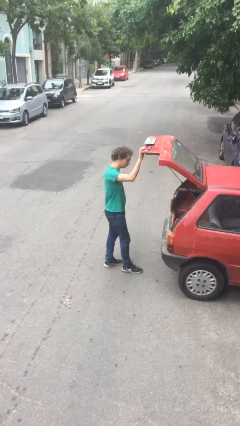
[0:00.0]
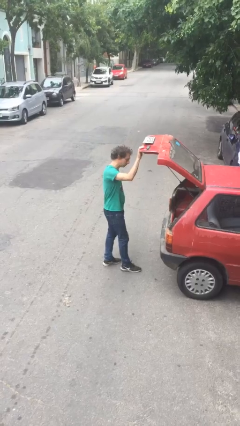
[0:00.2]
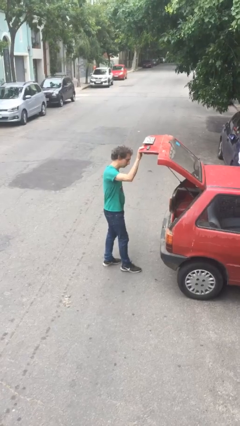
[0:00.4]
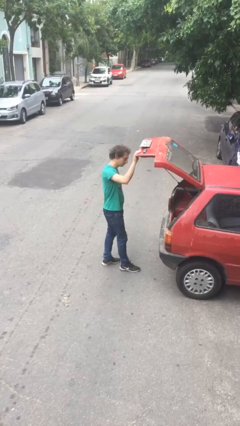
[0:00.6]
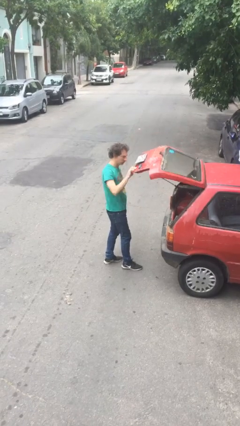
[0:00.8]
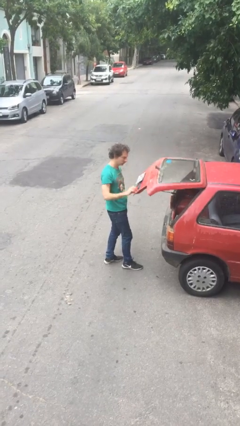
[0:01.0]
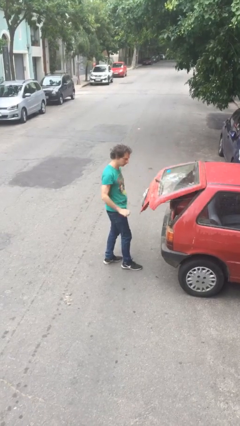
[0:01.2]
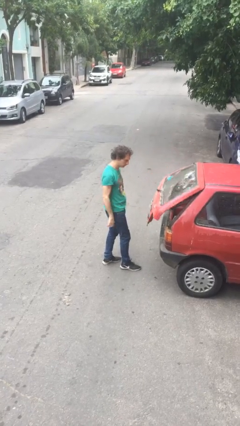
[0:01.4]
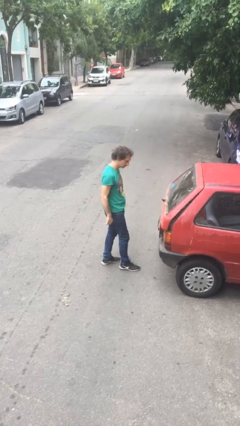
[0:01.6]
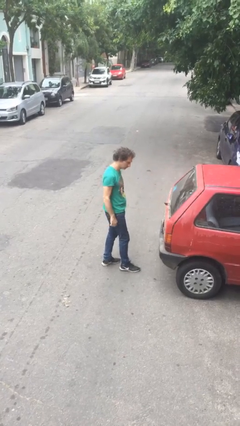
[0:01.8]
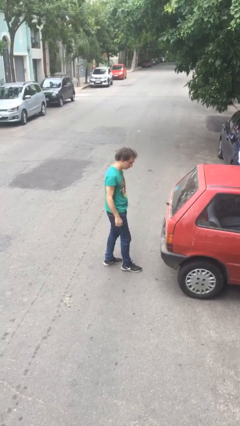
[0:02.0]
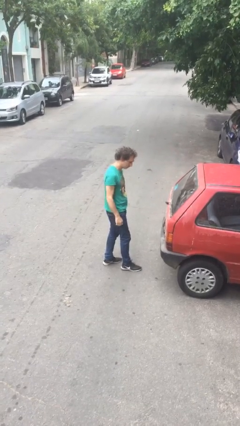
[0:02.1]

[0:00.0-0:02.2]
person closes car trunk

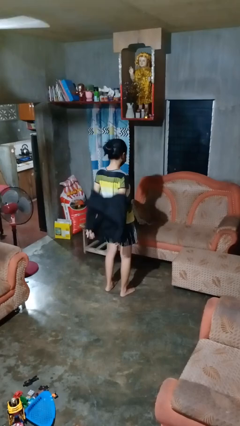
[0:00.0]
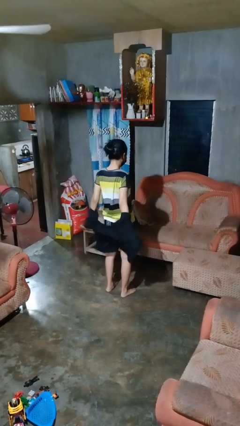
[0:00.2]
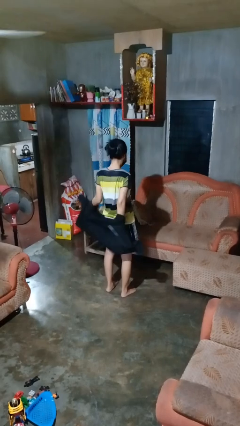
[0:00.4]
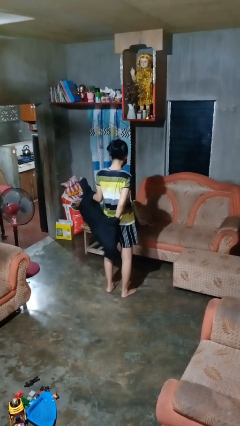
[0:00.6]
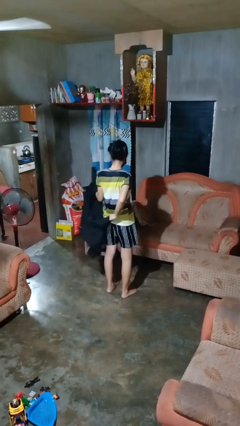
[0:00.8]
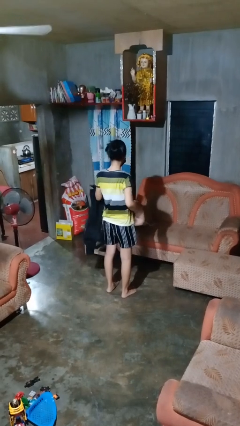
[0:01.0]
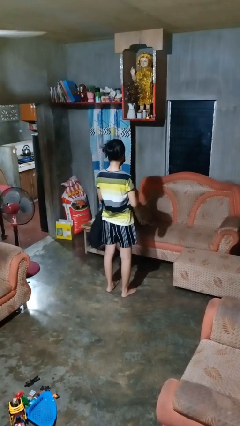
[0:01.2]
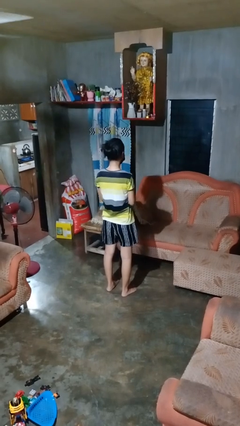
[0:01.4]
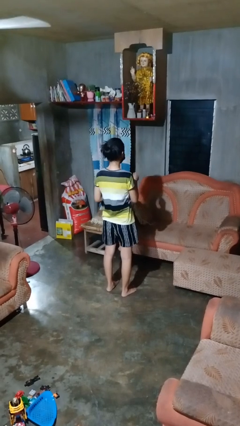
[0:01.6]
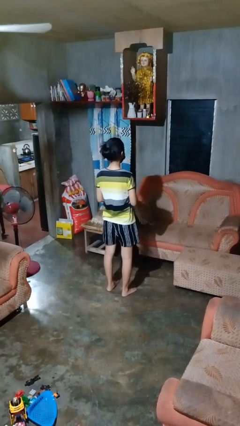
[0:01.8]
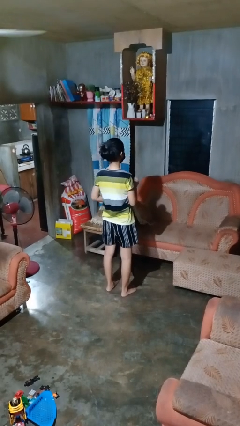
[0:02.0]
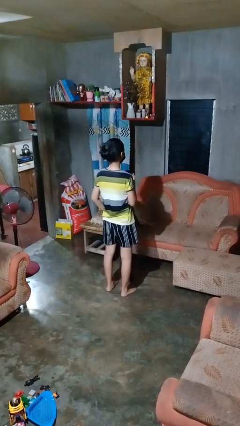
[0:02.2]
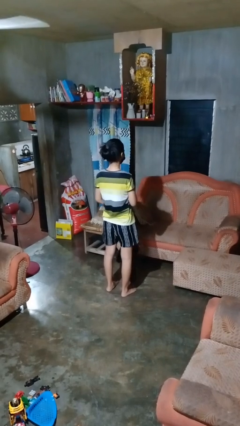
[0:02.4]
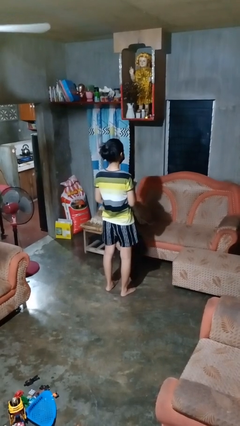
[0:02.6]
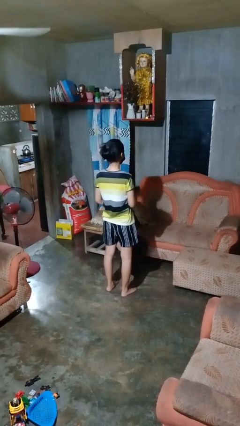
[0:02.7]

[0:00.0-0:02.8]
person takes off shirt

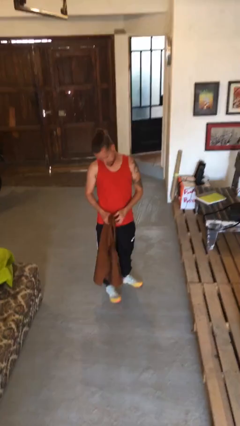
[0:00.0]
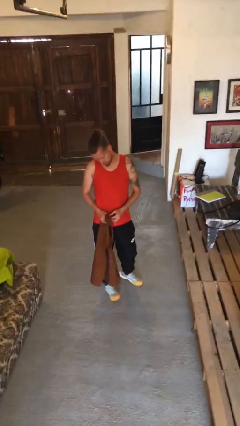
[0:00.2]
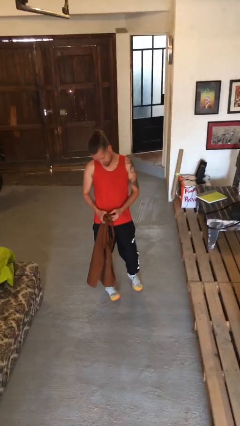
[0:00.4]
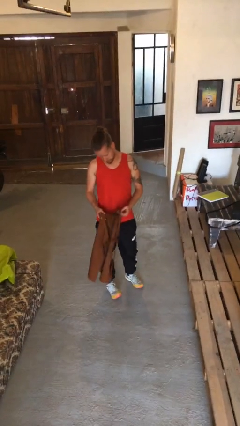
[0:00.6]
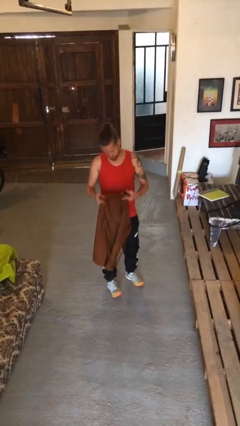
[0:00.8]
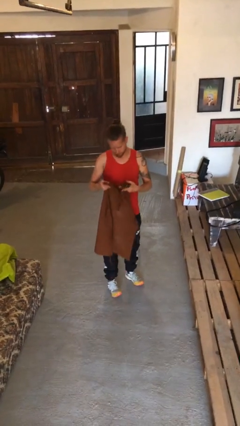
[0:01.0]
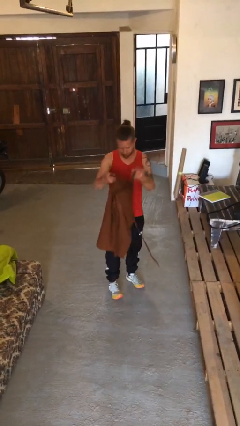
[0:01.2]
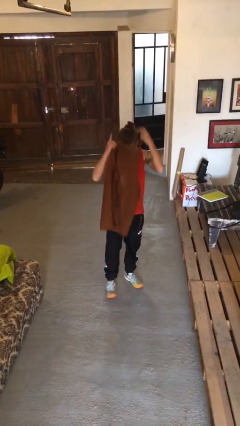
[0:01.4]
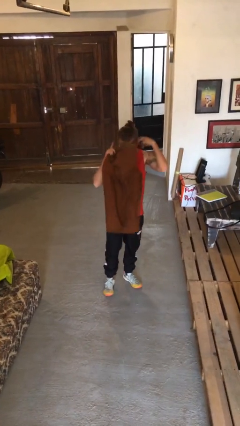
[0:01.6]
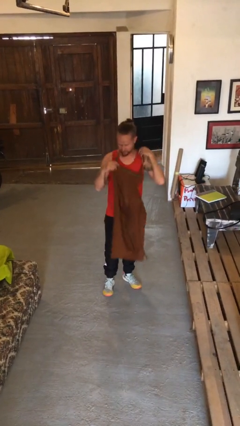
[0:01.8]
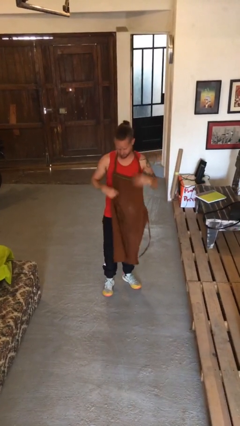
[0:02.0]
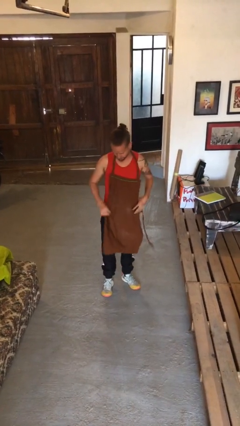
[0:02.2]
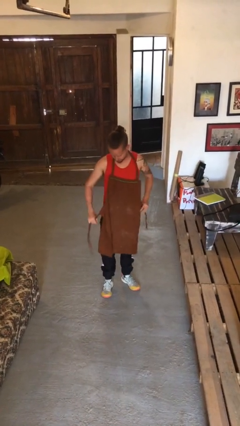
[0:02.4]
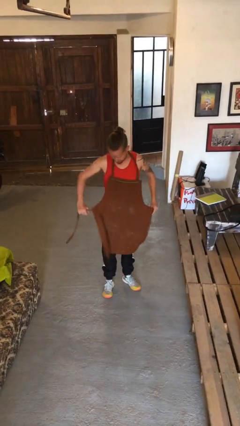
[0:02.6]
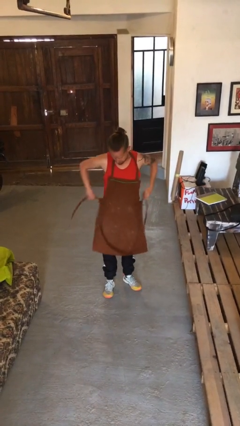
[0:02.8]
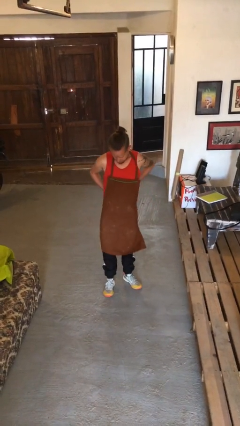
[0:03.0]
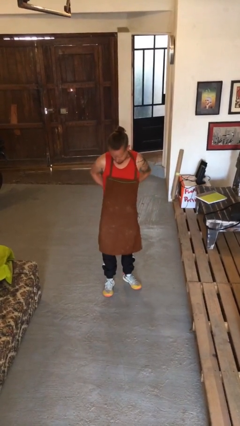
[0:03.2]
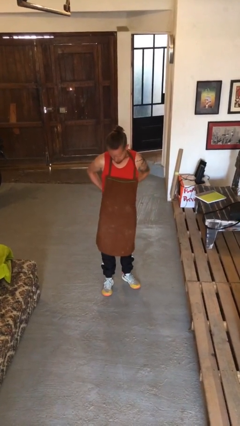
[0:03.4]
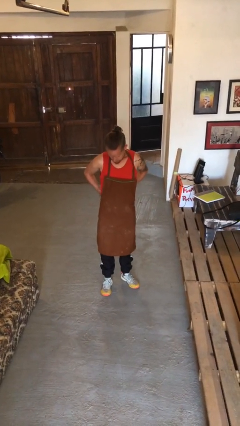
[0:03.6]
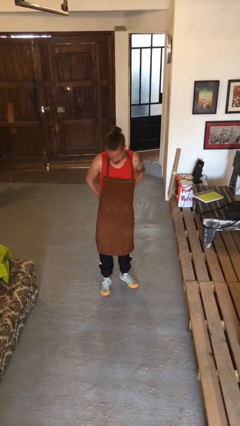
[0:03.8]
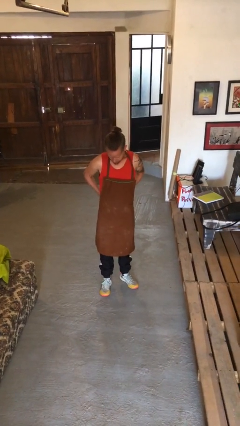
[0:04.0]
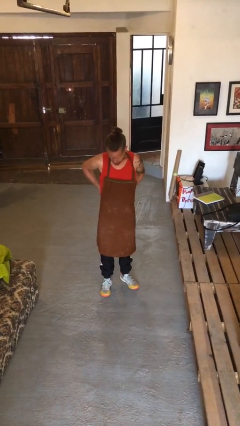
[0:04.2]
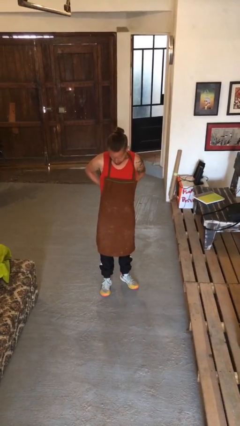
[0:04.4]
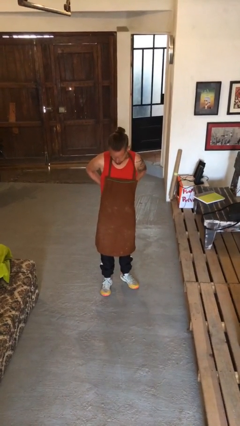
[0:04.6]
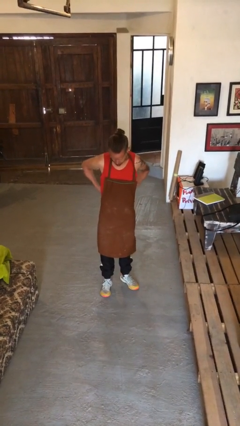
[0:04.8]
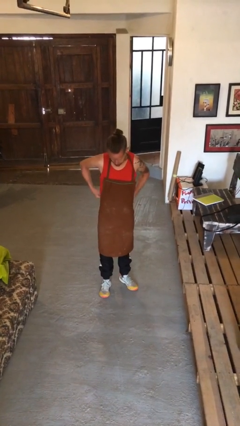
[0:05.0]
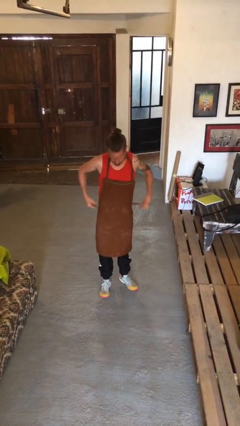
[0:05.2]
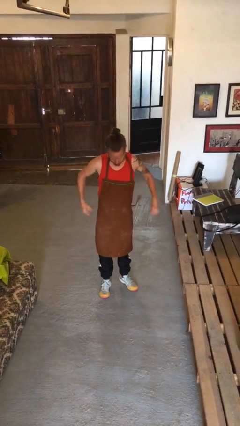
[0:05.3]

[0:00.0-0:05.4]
person puts on apron

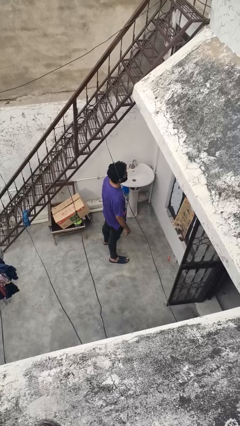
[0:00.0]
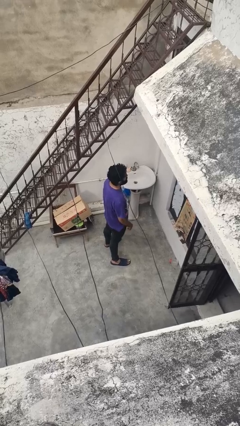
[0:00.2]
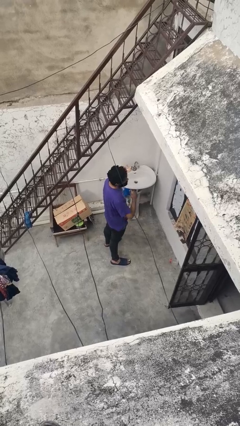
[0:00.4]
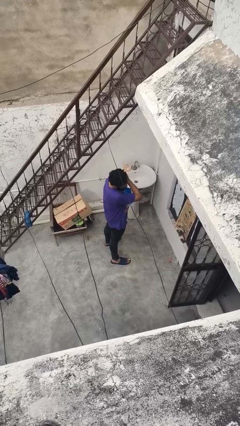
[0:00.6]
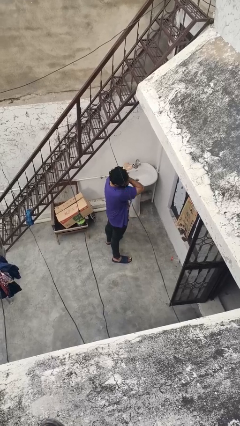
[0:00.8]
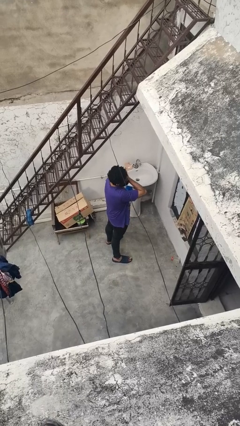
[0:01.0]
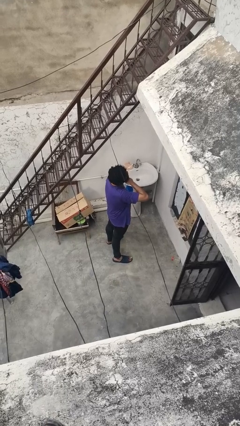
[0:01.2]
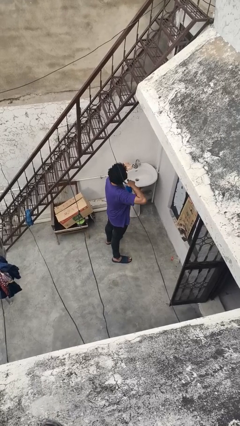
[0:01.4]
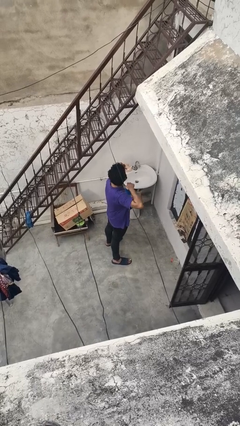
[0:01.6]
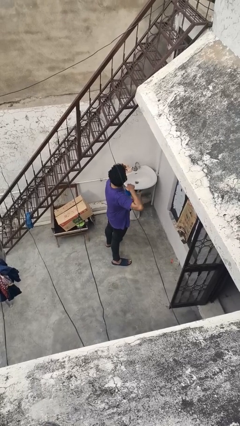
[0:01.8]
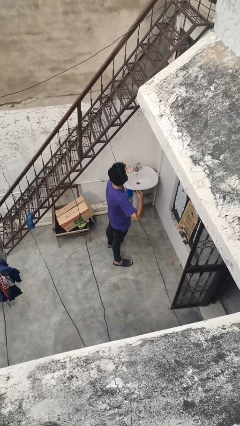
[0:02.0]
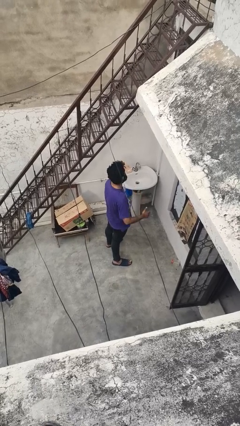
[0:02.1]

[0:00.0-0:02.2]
person gestures cut

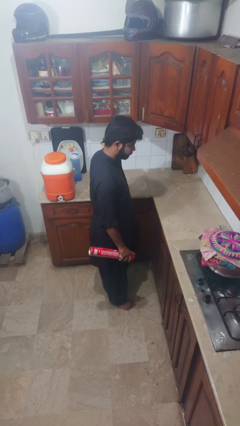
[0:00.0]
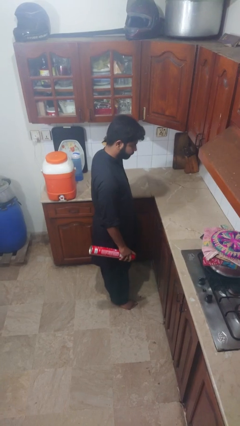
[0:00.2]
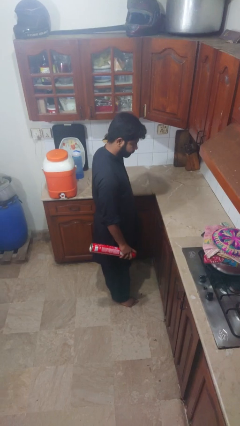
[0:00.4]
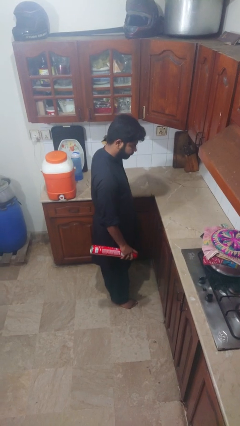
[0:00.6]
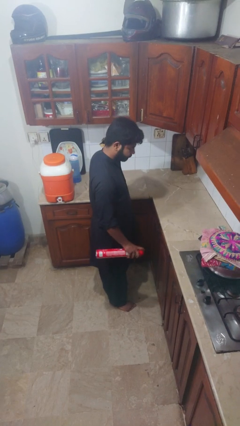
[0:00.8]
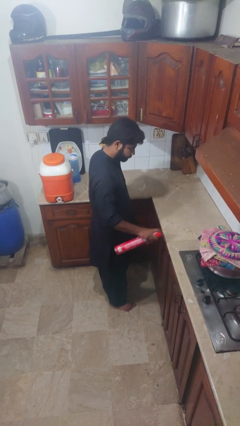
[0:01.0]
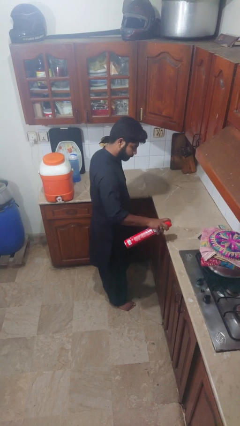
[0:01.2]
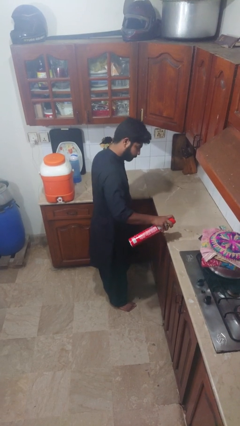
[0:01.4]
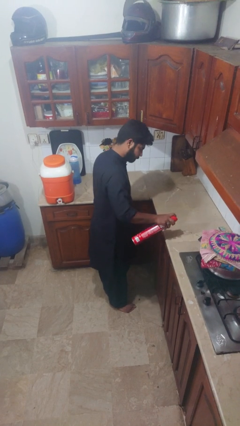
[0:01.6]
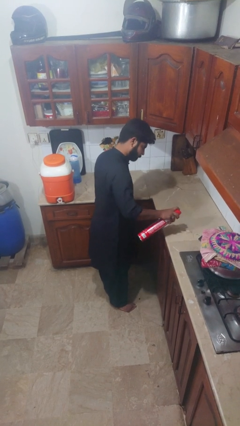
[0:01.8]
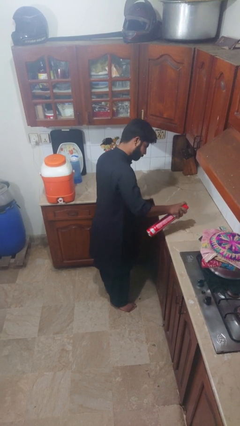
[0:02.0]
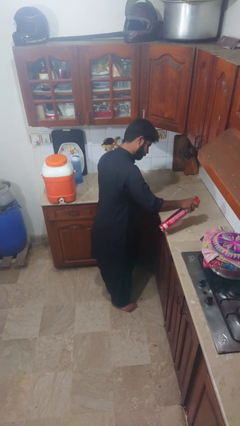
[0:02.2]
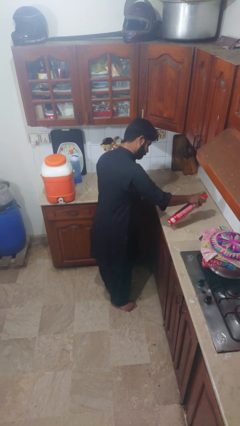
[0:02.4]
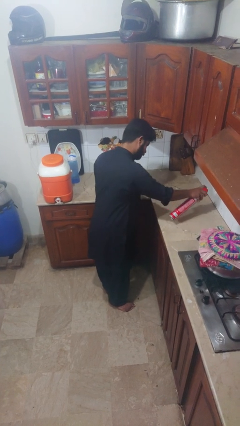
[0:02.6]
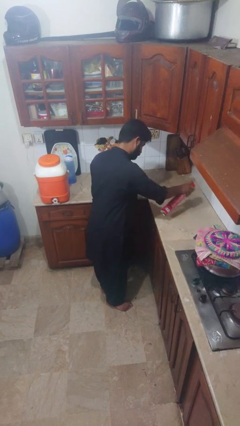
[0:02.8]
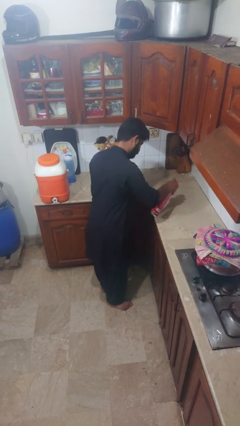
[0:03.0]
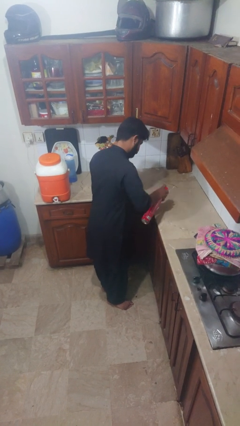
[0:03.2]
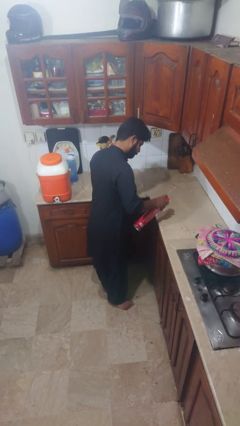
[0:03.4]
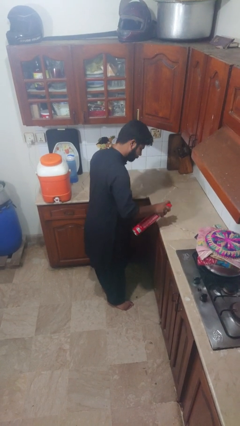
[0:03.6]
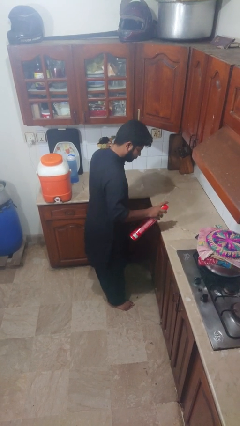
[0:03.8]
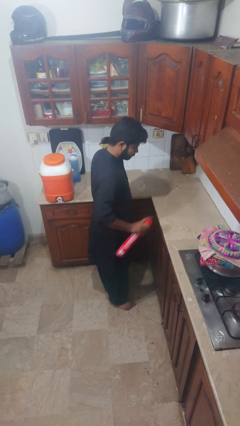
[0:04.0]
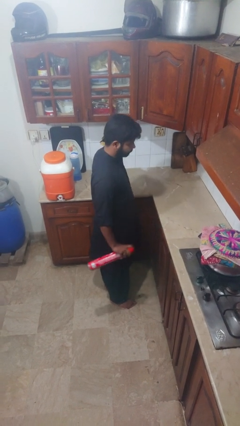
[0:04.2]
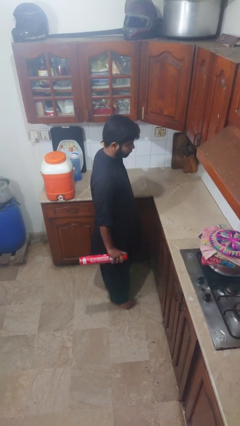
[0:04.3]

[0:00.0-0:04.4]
person sprays from bottle

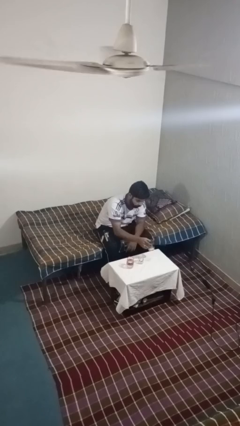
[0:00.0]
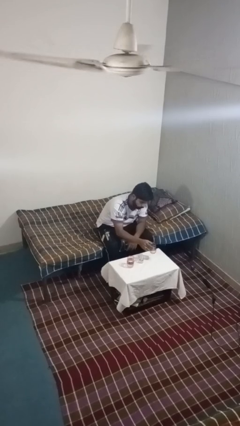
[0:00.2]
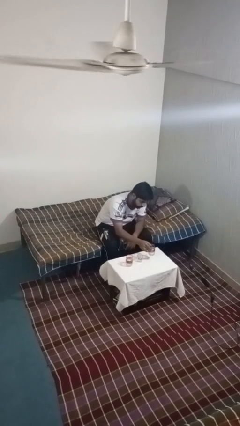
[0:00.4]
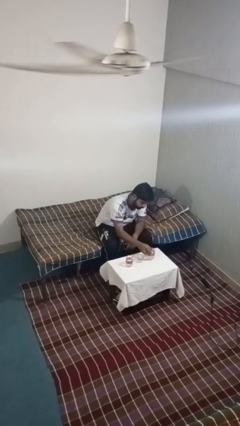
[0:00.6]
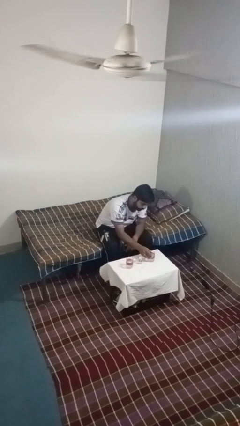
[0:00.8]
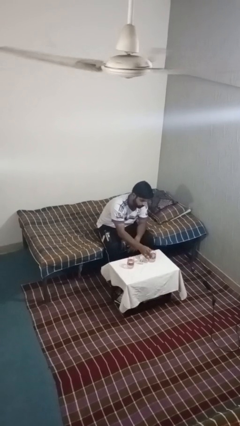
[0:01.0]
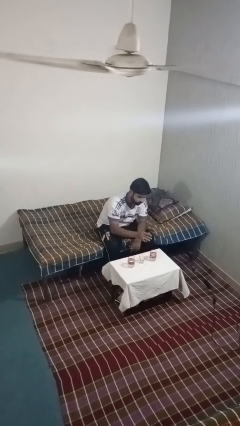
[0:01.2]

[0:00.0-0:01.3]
person puts down object on table
